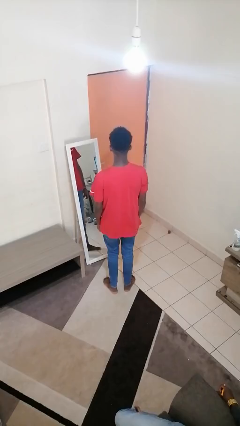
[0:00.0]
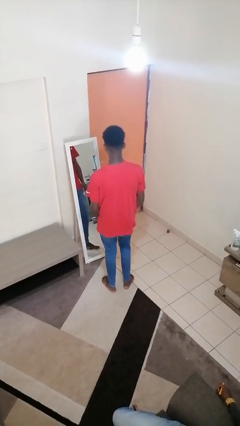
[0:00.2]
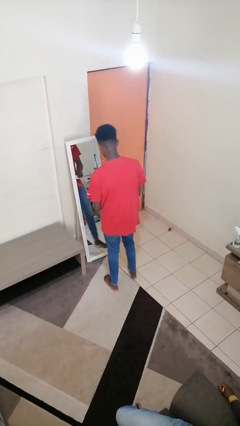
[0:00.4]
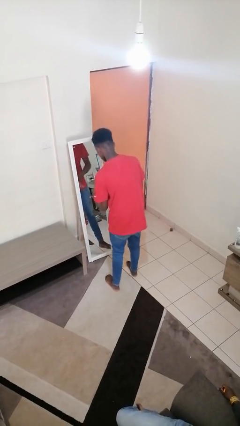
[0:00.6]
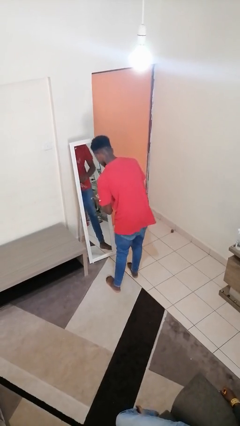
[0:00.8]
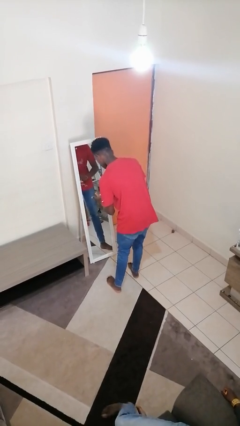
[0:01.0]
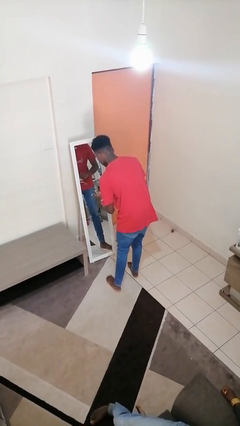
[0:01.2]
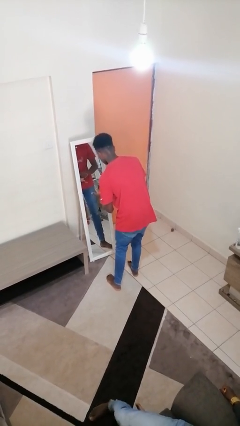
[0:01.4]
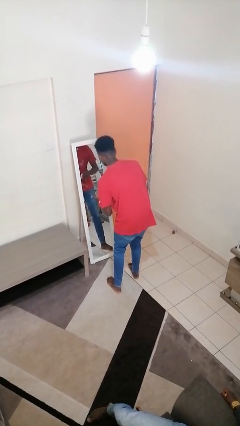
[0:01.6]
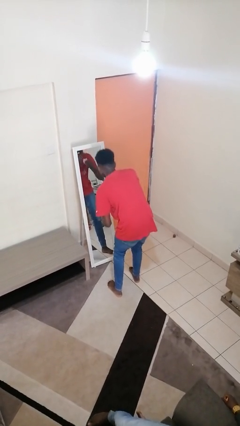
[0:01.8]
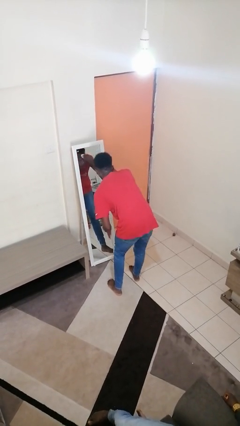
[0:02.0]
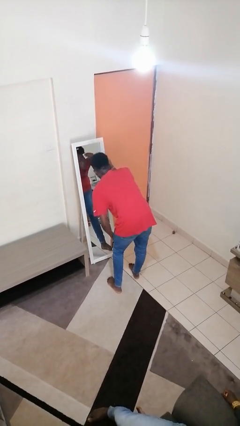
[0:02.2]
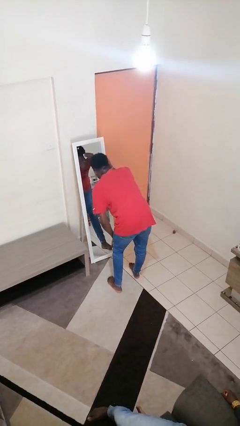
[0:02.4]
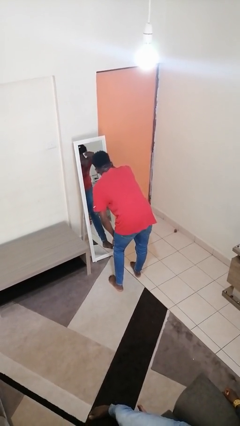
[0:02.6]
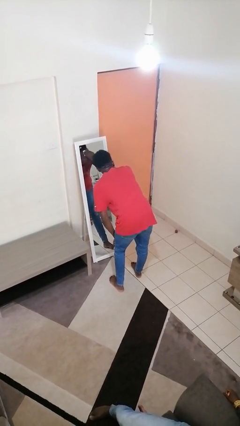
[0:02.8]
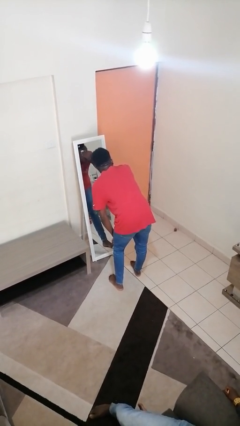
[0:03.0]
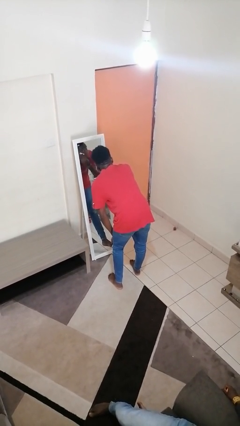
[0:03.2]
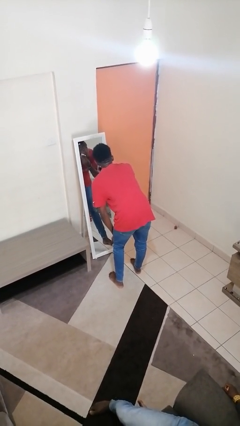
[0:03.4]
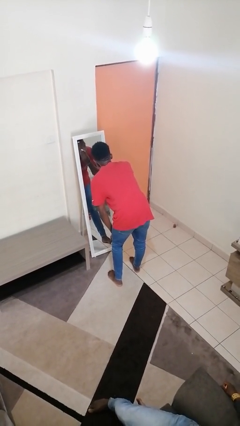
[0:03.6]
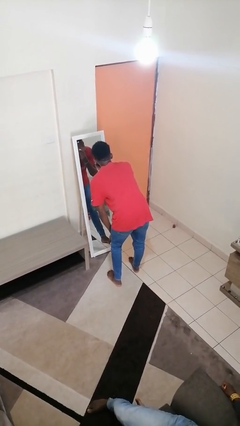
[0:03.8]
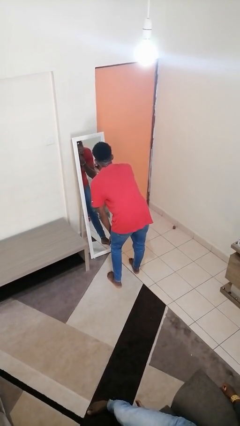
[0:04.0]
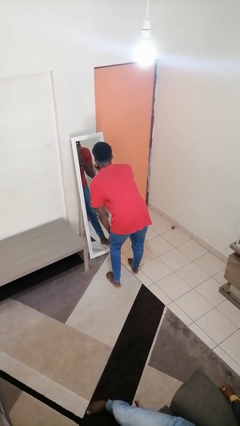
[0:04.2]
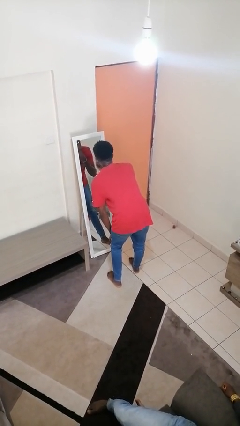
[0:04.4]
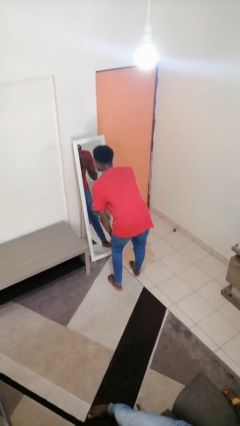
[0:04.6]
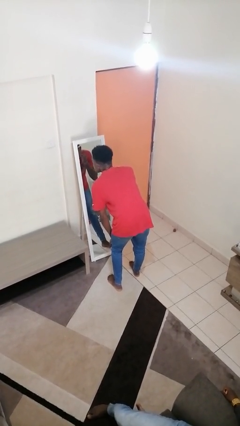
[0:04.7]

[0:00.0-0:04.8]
person applies foundation makeup

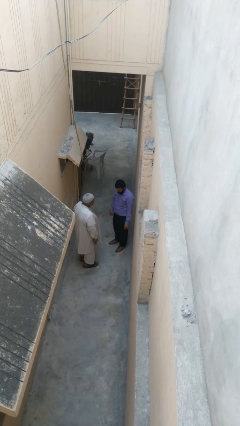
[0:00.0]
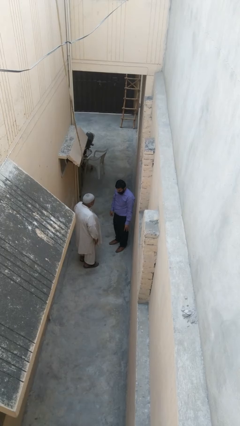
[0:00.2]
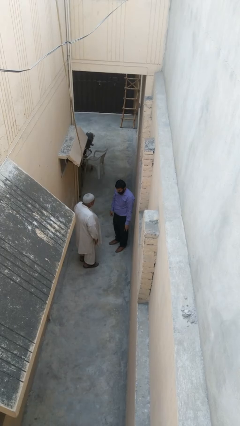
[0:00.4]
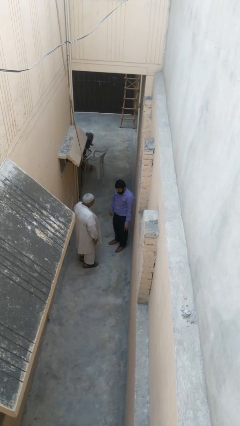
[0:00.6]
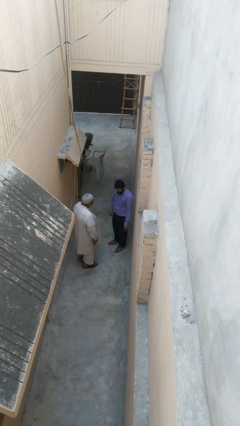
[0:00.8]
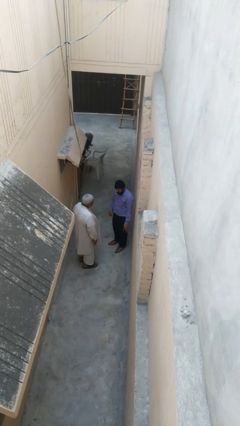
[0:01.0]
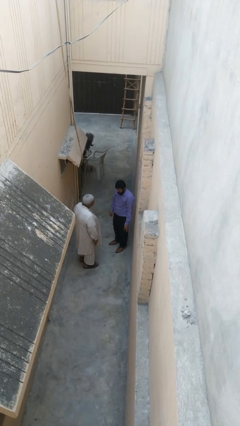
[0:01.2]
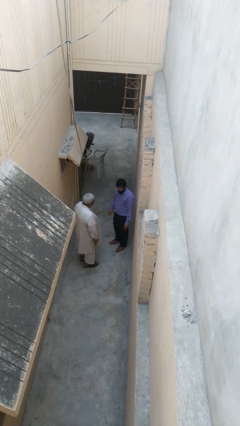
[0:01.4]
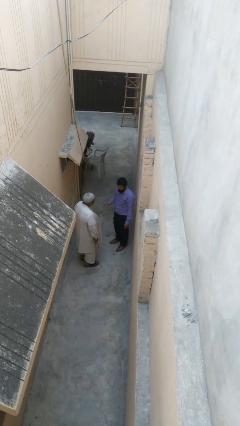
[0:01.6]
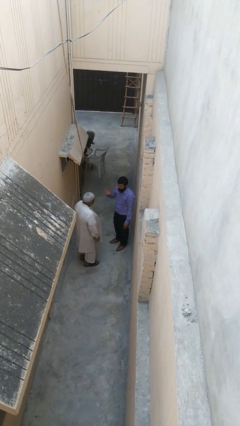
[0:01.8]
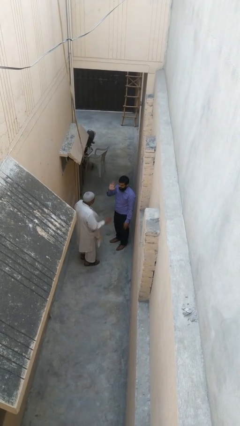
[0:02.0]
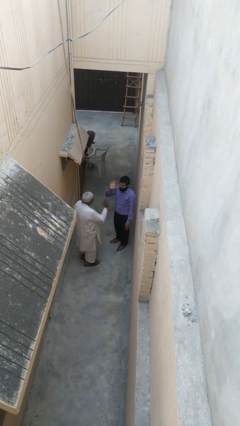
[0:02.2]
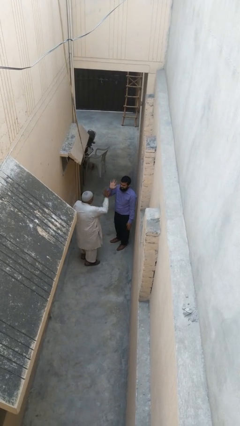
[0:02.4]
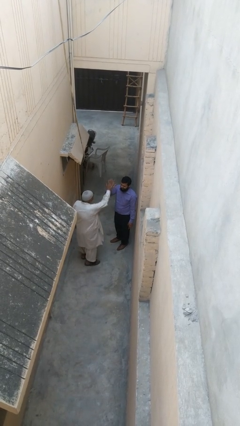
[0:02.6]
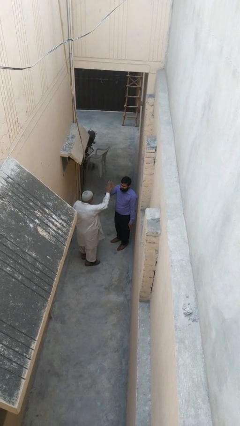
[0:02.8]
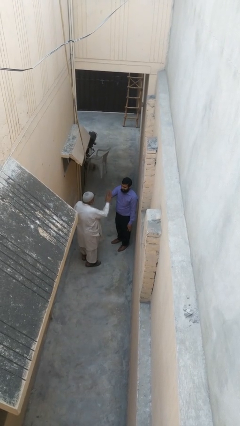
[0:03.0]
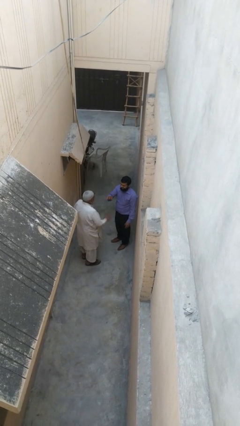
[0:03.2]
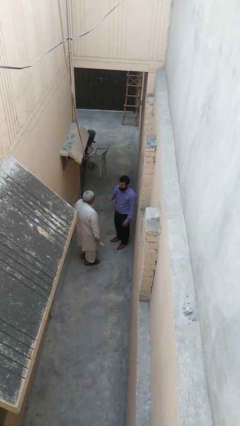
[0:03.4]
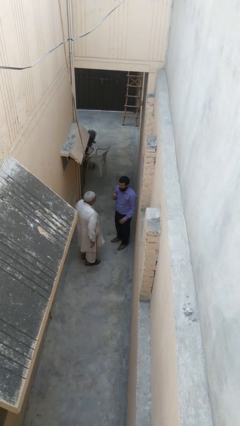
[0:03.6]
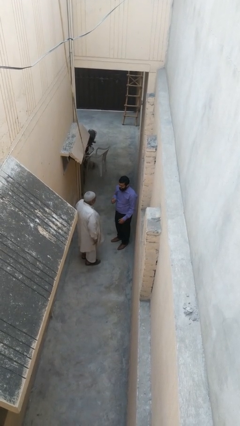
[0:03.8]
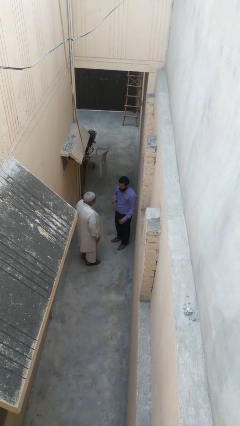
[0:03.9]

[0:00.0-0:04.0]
person highfives hand

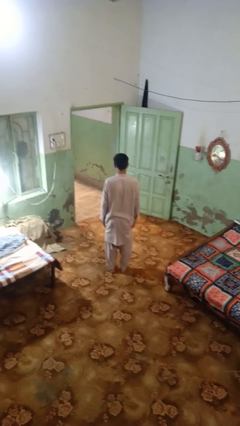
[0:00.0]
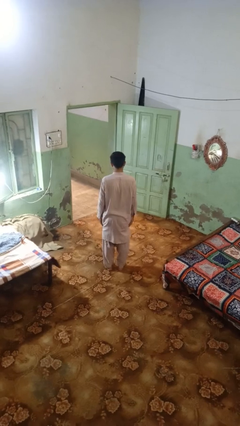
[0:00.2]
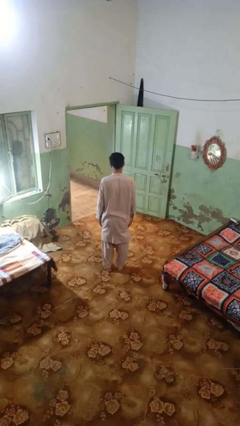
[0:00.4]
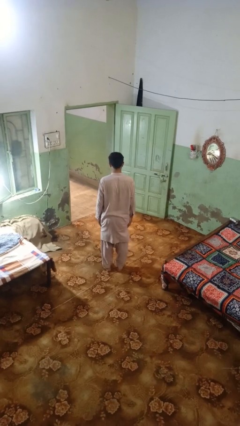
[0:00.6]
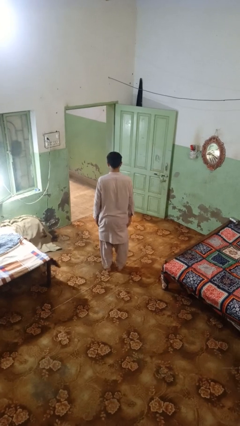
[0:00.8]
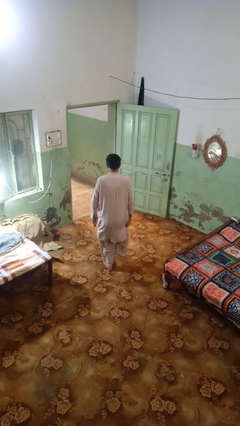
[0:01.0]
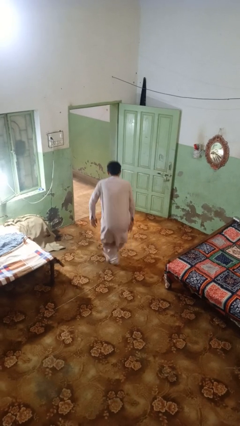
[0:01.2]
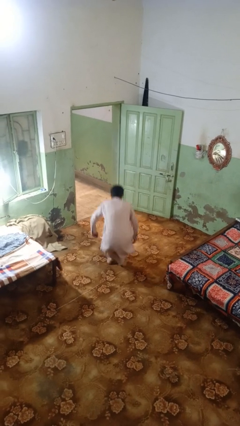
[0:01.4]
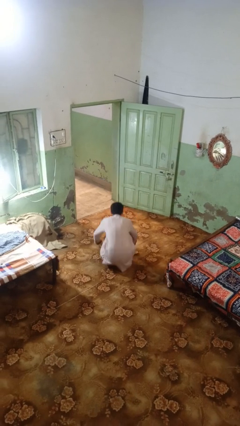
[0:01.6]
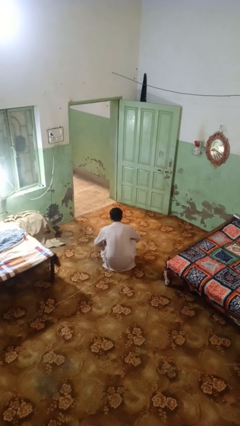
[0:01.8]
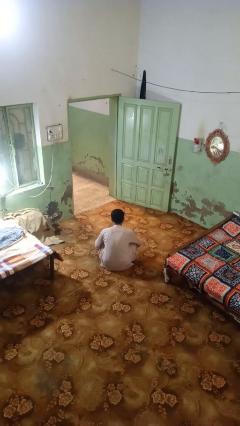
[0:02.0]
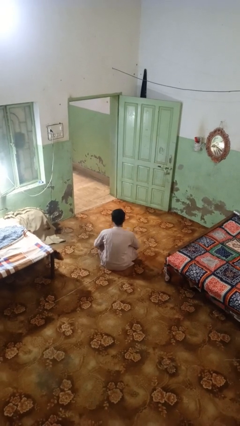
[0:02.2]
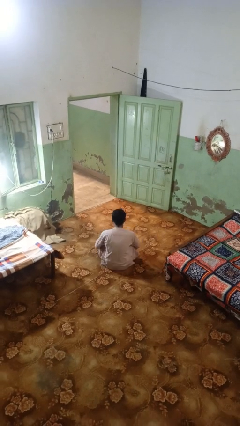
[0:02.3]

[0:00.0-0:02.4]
person sits crisscross

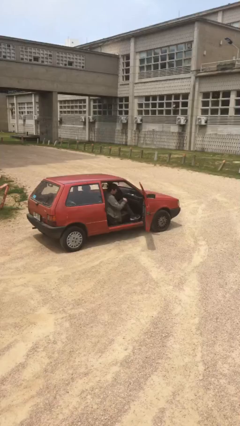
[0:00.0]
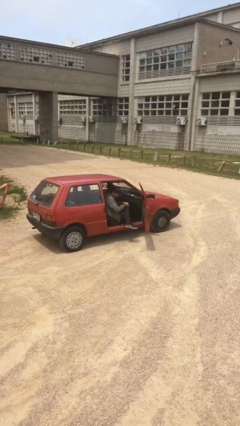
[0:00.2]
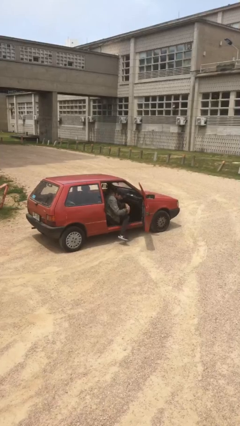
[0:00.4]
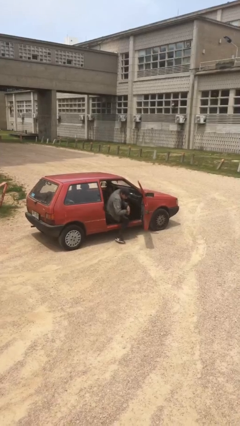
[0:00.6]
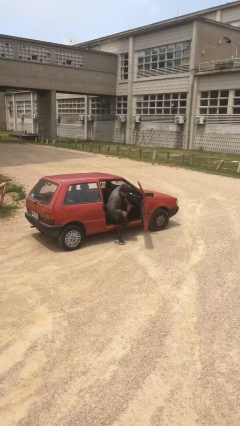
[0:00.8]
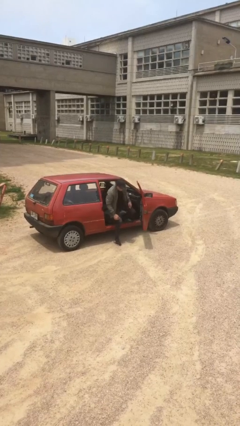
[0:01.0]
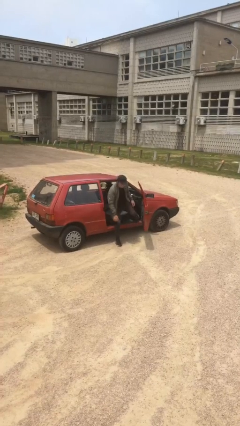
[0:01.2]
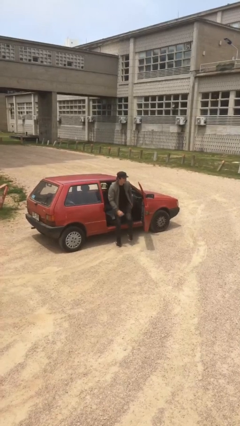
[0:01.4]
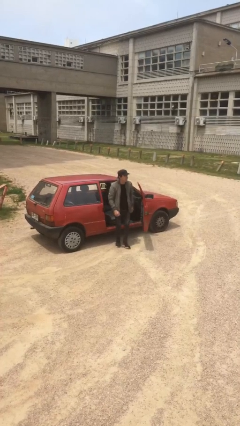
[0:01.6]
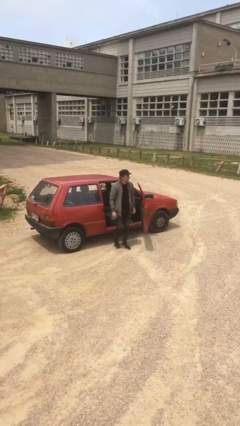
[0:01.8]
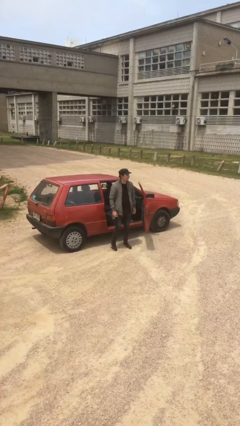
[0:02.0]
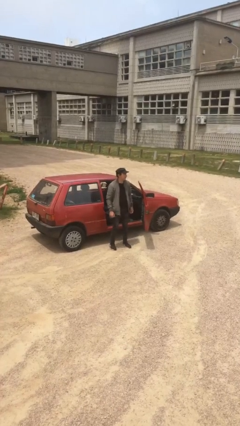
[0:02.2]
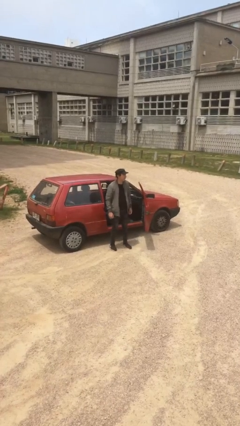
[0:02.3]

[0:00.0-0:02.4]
person exits car

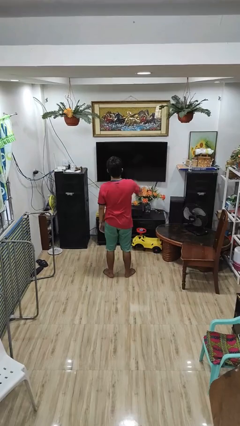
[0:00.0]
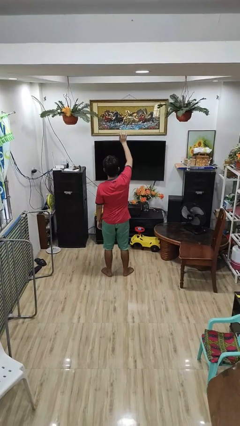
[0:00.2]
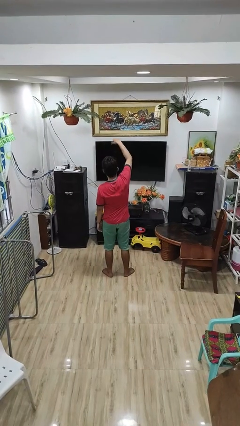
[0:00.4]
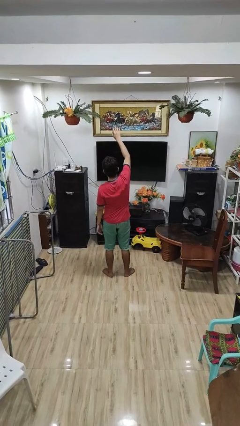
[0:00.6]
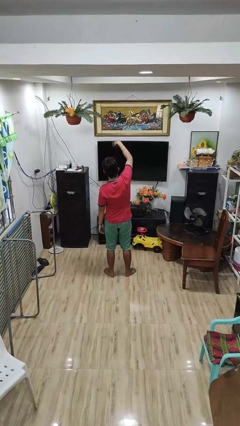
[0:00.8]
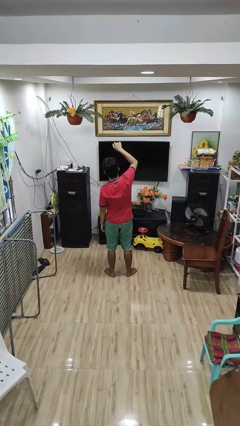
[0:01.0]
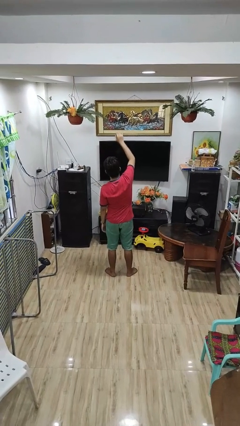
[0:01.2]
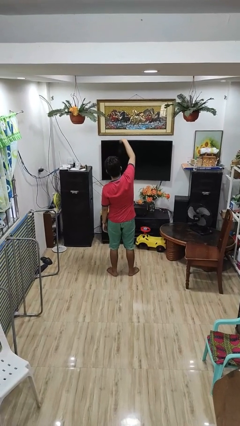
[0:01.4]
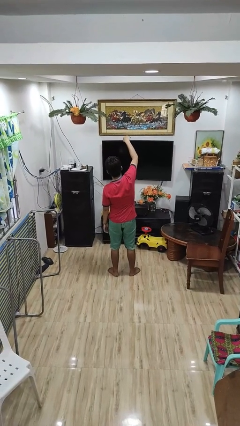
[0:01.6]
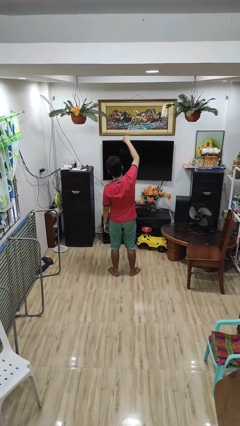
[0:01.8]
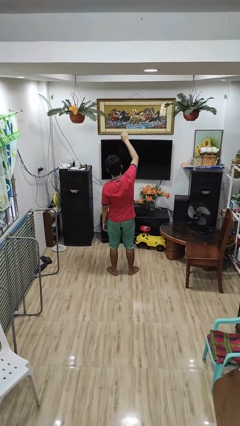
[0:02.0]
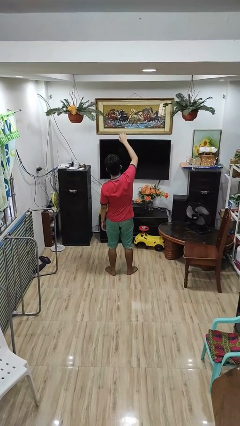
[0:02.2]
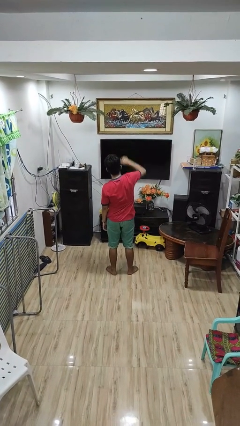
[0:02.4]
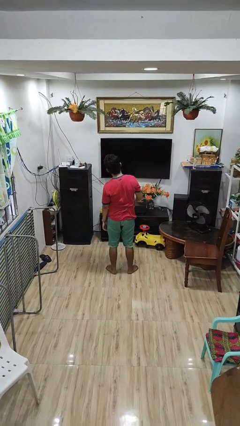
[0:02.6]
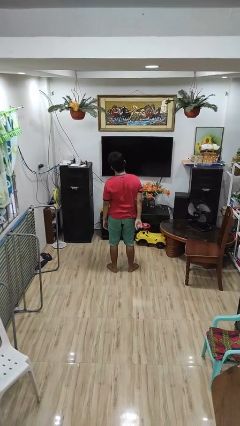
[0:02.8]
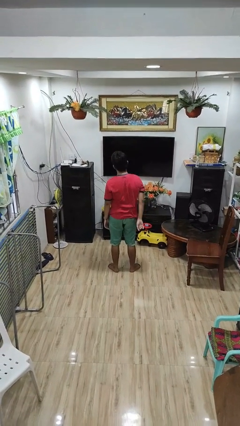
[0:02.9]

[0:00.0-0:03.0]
person gestures come here

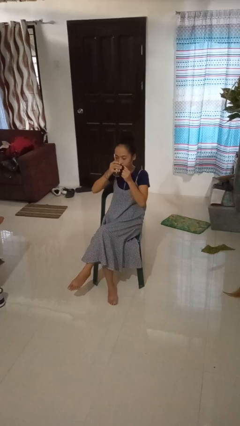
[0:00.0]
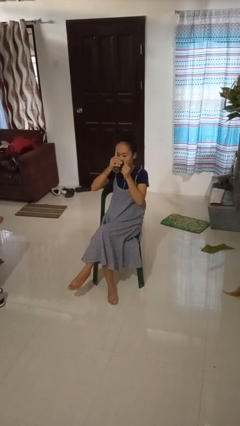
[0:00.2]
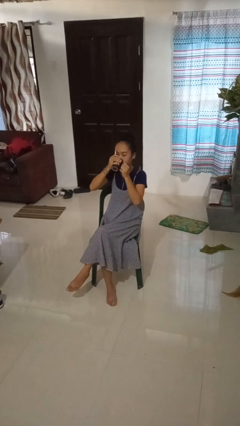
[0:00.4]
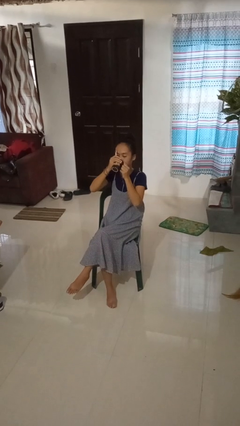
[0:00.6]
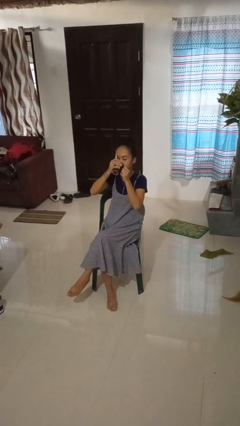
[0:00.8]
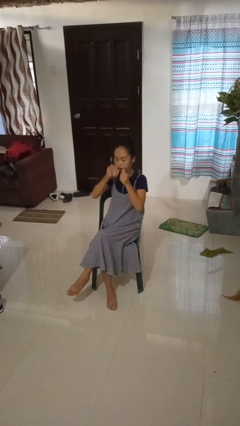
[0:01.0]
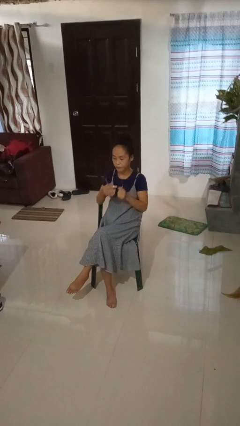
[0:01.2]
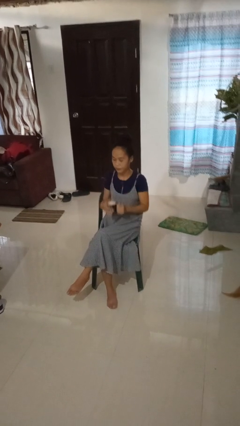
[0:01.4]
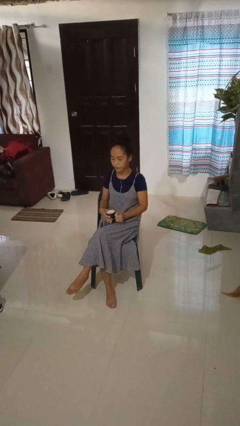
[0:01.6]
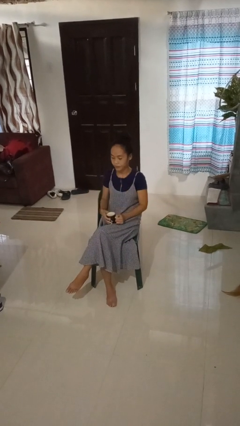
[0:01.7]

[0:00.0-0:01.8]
person drinks from mug
